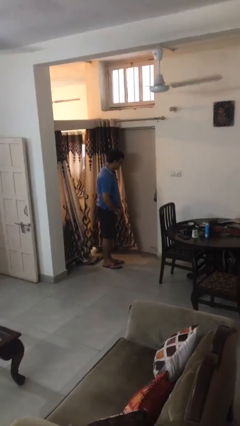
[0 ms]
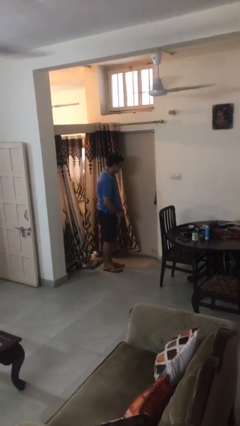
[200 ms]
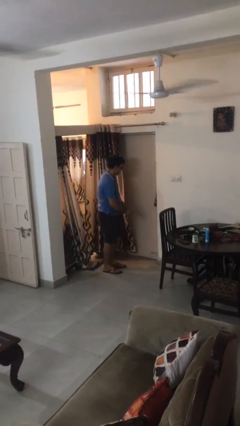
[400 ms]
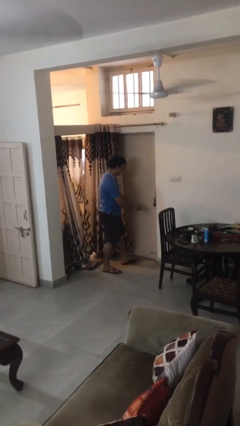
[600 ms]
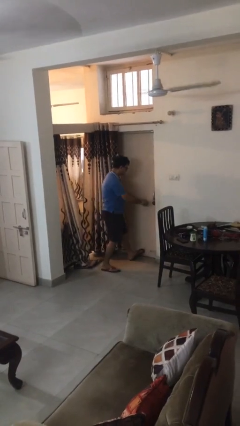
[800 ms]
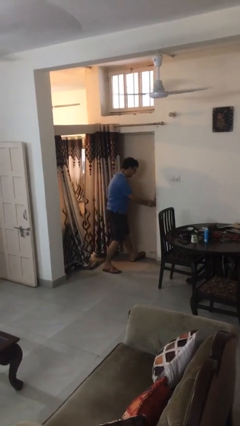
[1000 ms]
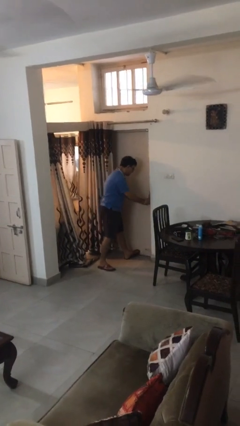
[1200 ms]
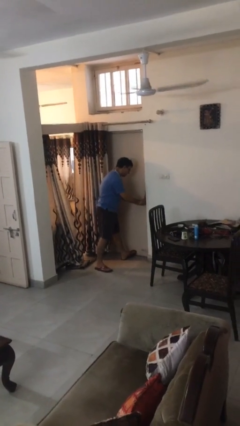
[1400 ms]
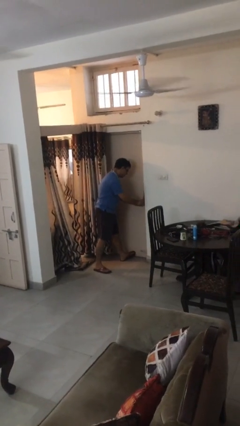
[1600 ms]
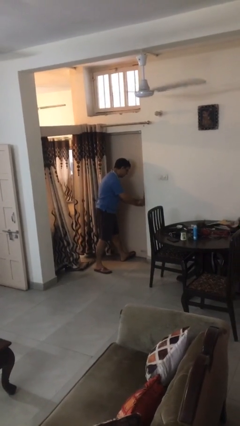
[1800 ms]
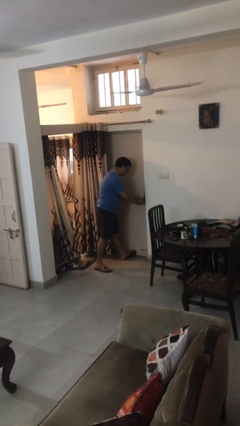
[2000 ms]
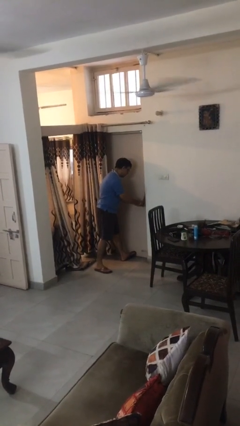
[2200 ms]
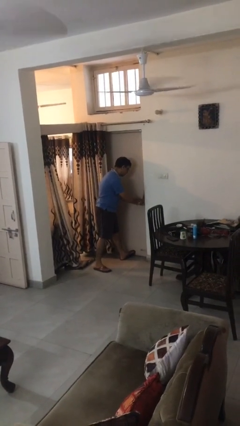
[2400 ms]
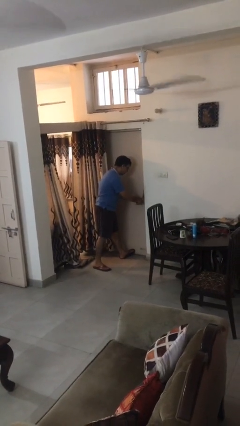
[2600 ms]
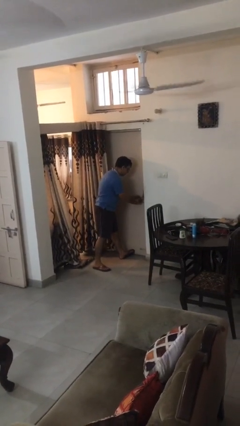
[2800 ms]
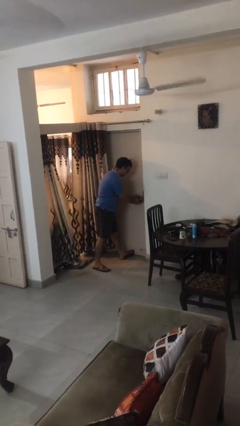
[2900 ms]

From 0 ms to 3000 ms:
person unlocks door with keys

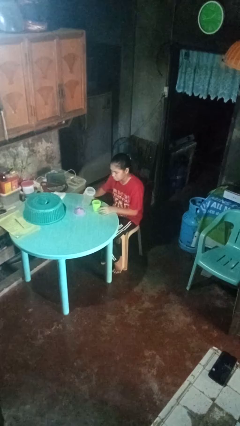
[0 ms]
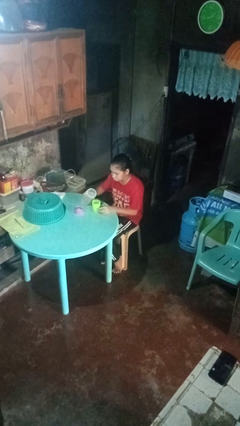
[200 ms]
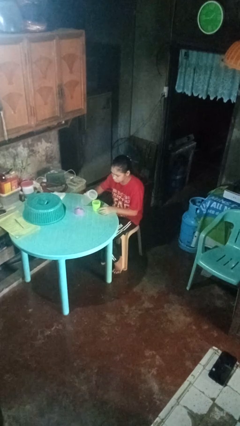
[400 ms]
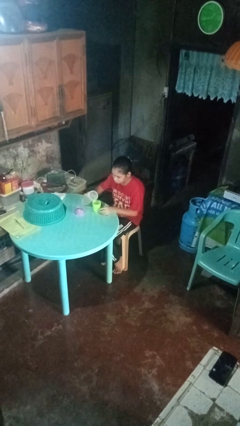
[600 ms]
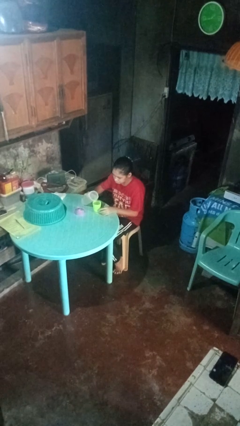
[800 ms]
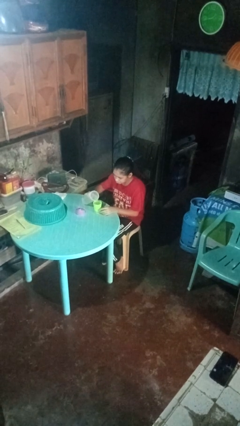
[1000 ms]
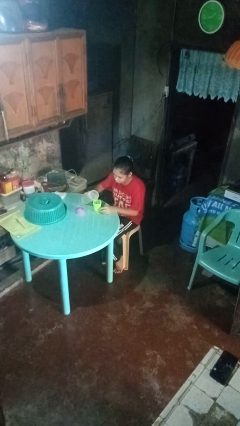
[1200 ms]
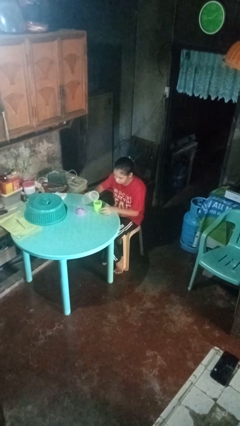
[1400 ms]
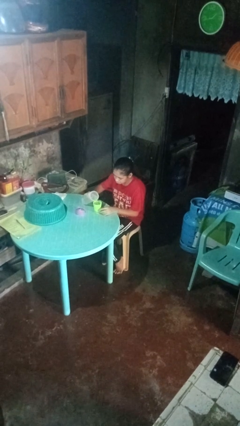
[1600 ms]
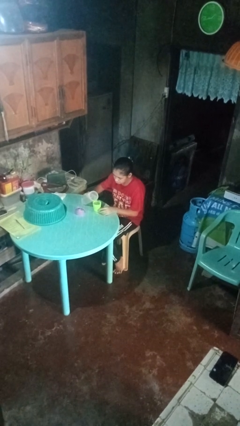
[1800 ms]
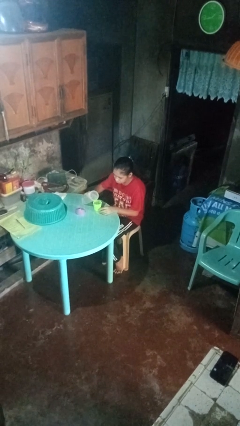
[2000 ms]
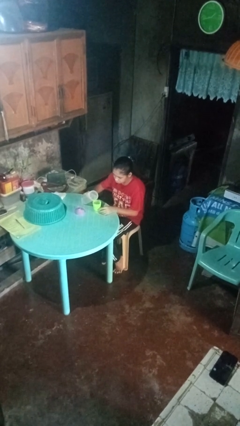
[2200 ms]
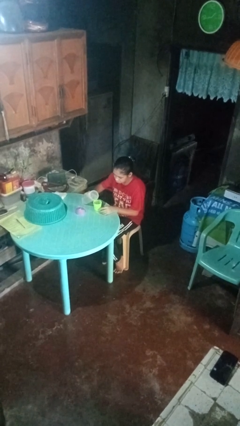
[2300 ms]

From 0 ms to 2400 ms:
person pours liquid into cup

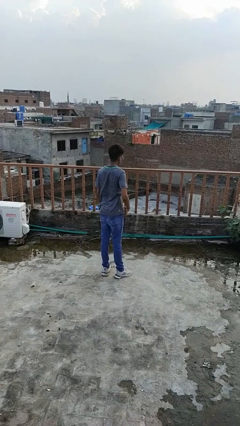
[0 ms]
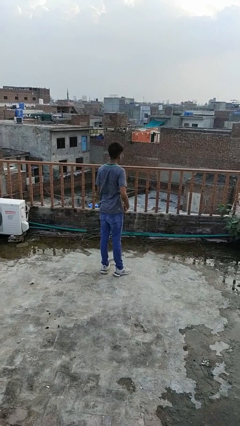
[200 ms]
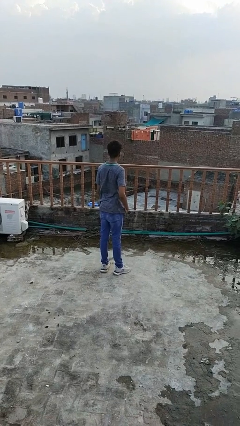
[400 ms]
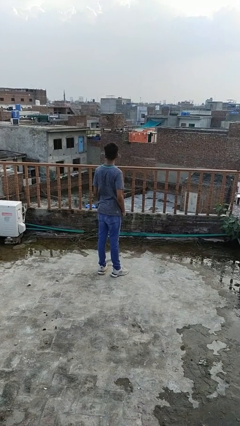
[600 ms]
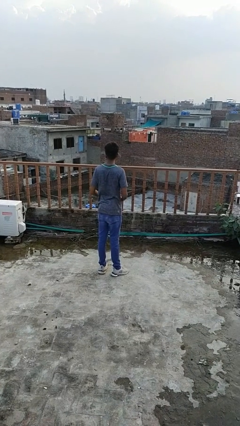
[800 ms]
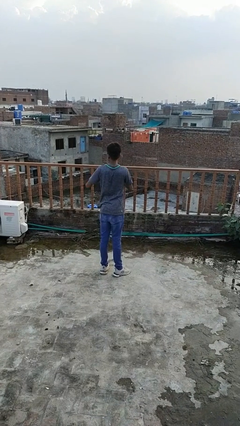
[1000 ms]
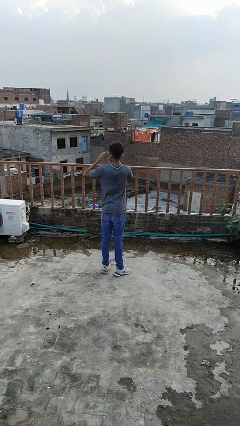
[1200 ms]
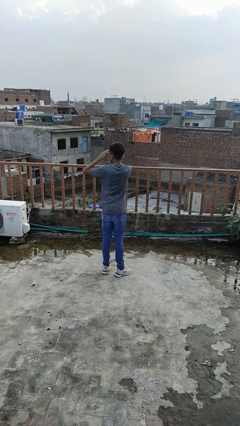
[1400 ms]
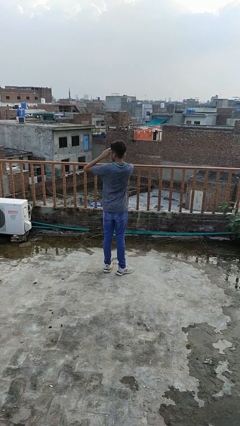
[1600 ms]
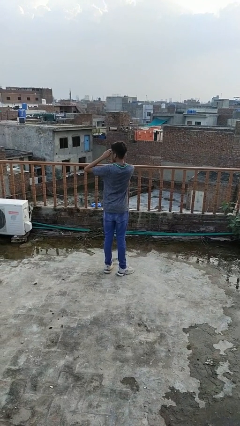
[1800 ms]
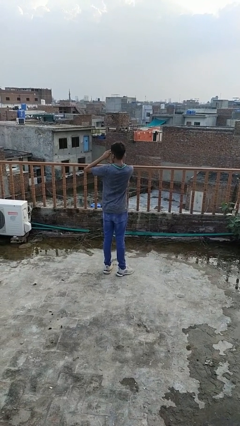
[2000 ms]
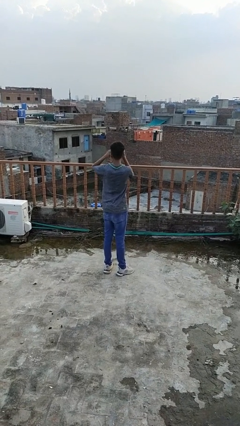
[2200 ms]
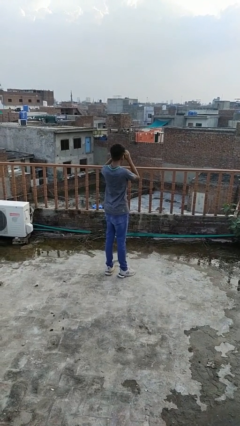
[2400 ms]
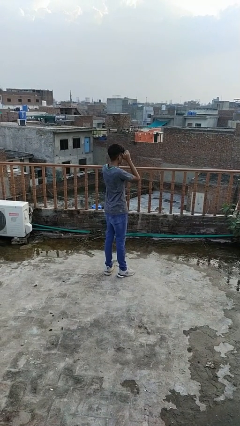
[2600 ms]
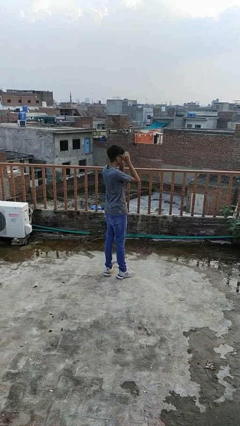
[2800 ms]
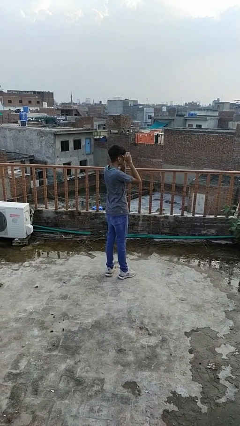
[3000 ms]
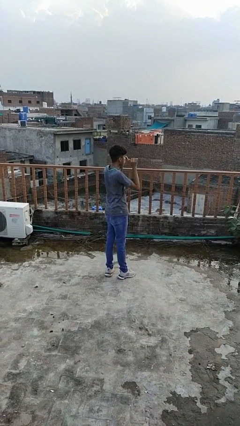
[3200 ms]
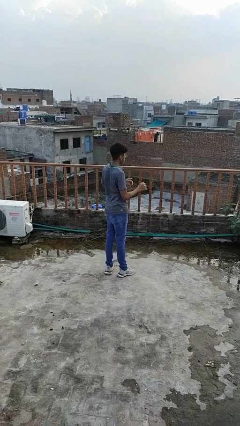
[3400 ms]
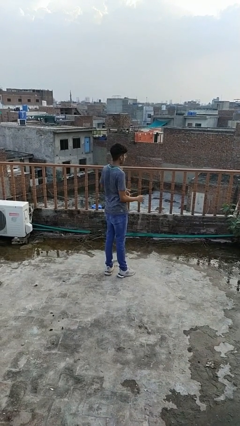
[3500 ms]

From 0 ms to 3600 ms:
person shades eyes

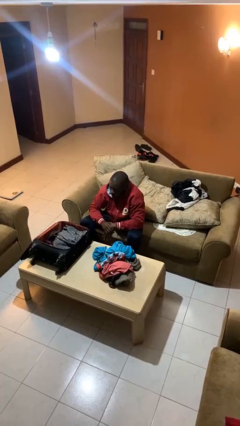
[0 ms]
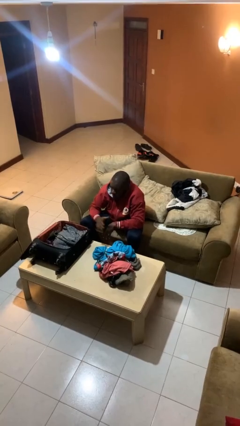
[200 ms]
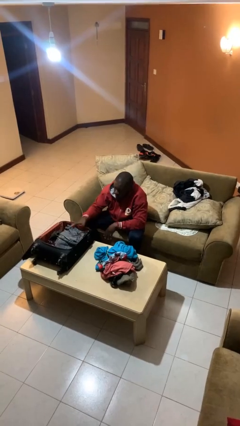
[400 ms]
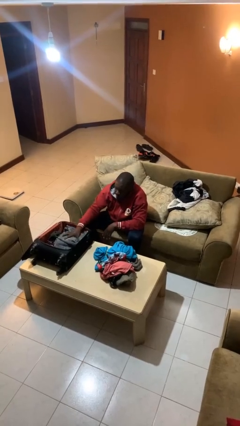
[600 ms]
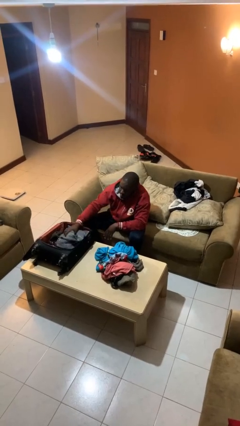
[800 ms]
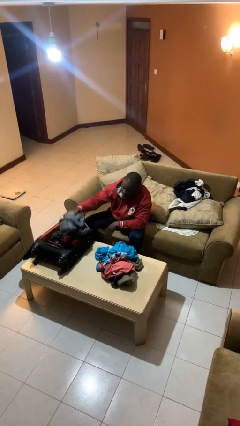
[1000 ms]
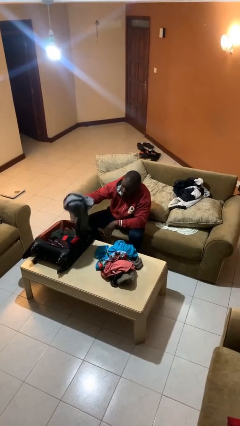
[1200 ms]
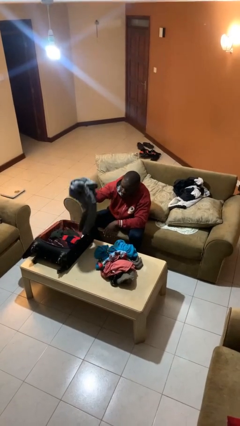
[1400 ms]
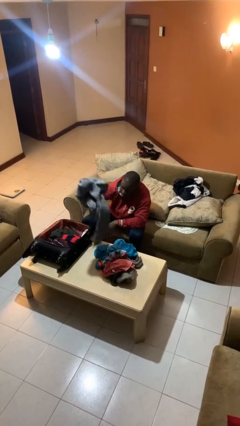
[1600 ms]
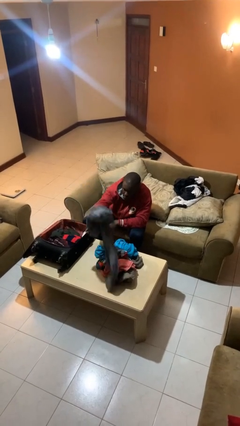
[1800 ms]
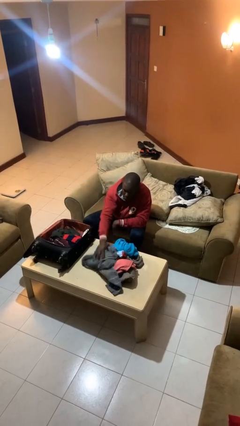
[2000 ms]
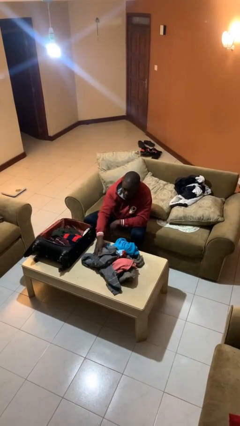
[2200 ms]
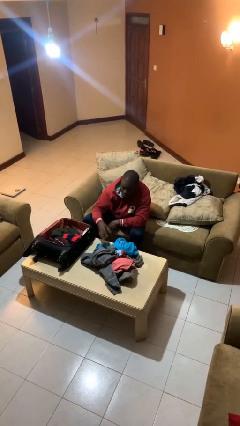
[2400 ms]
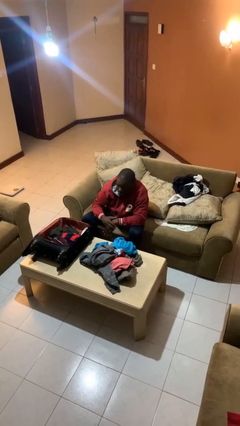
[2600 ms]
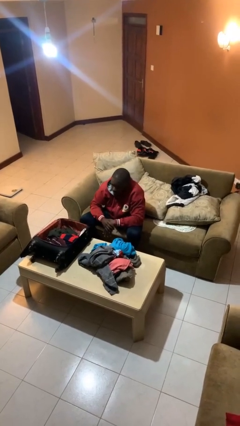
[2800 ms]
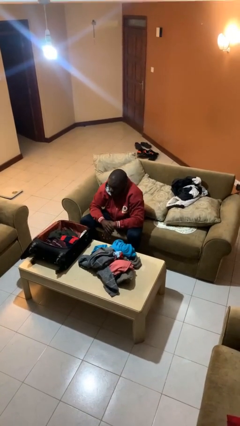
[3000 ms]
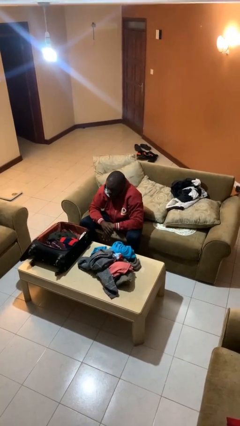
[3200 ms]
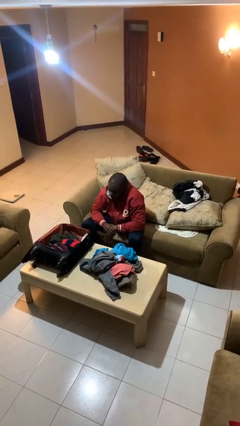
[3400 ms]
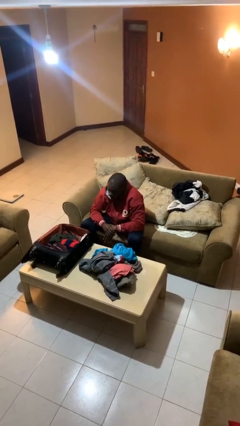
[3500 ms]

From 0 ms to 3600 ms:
person unloads clothes from suitcase

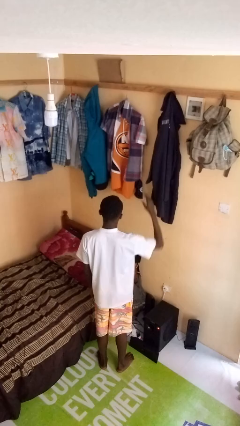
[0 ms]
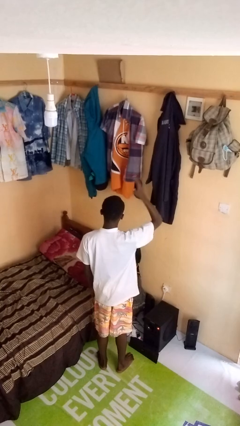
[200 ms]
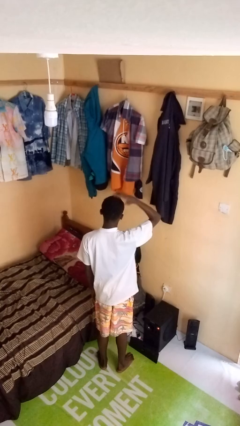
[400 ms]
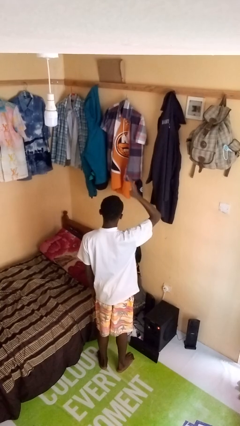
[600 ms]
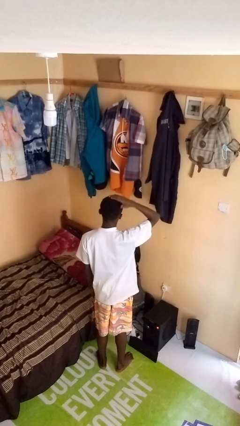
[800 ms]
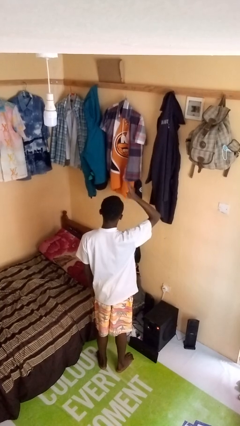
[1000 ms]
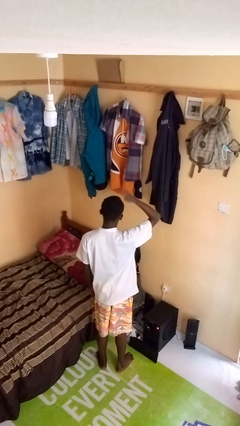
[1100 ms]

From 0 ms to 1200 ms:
person pats head

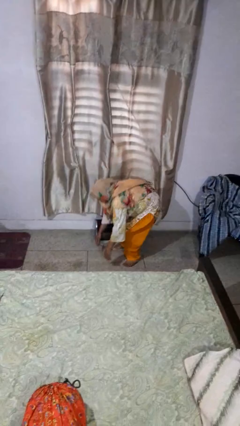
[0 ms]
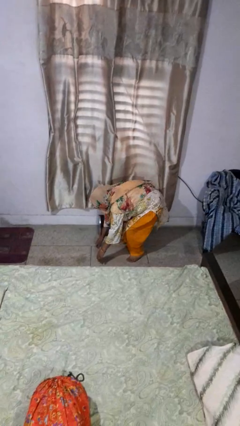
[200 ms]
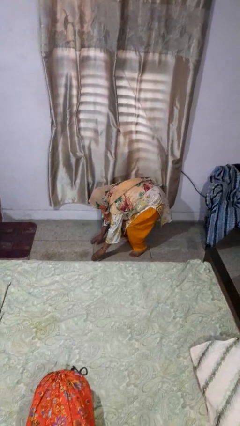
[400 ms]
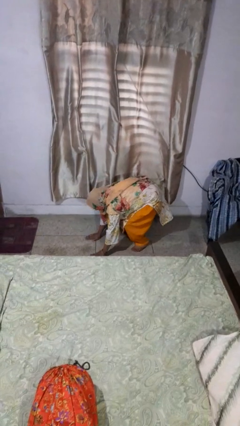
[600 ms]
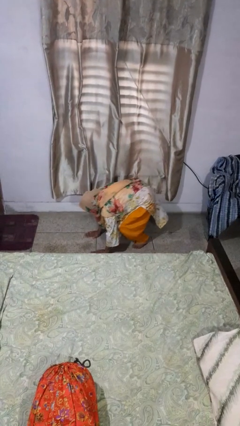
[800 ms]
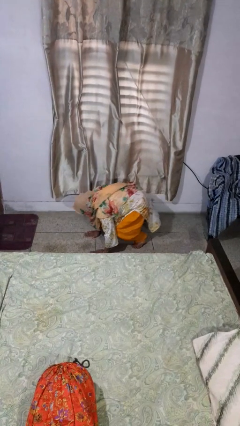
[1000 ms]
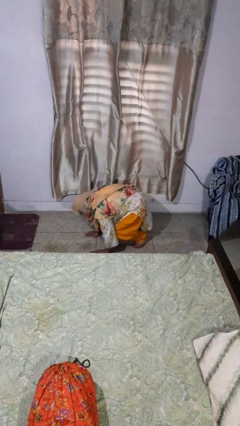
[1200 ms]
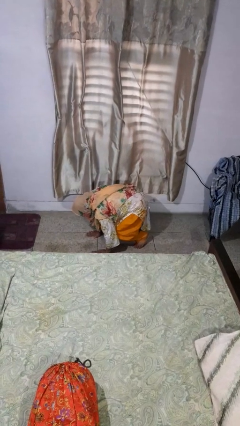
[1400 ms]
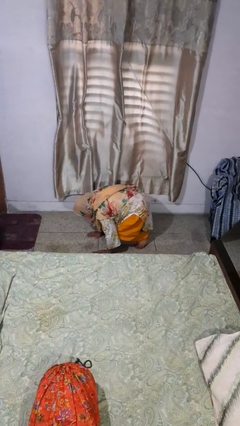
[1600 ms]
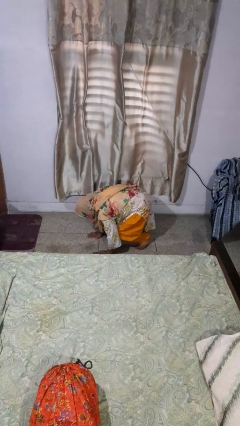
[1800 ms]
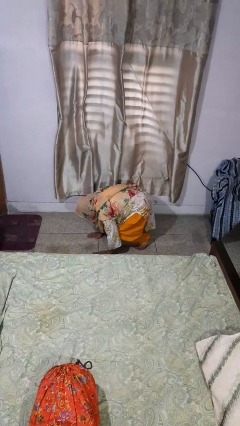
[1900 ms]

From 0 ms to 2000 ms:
person lies down on floor

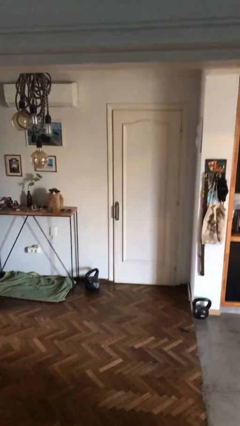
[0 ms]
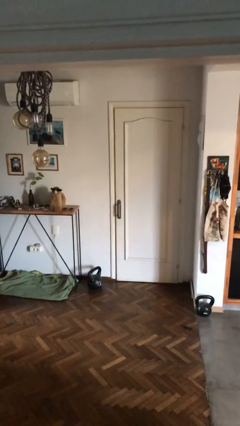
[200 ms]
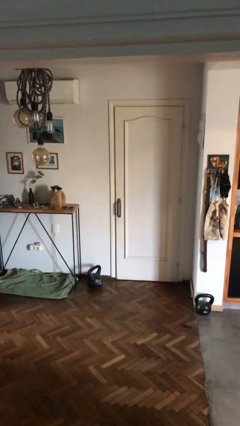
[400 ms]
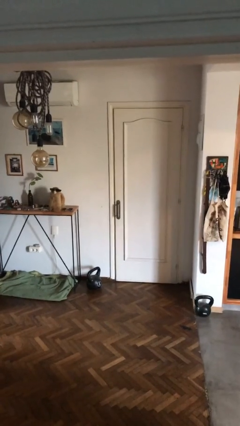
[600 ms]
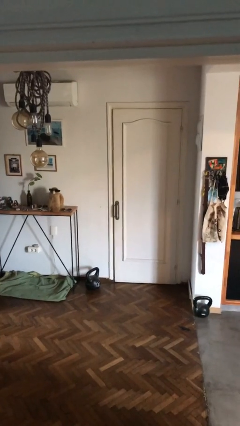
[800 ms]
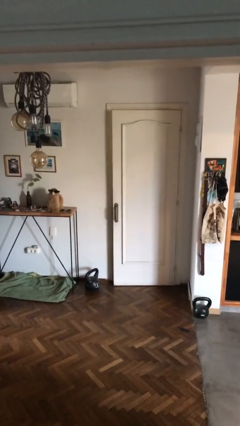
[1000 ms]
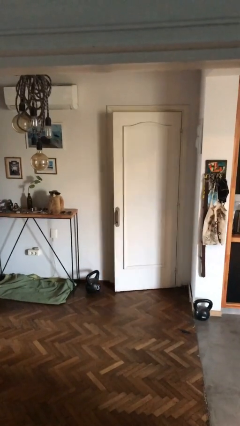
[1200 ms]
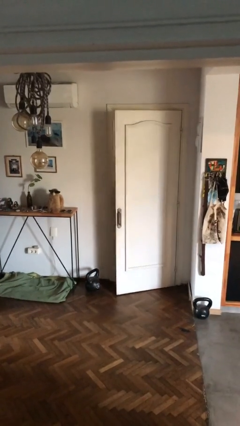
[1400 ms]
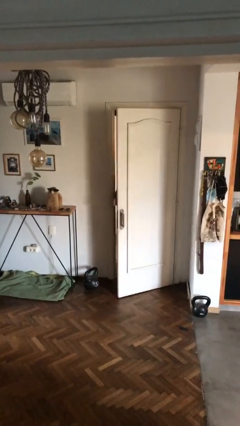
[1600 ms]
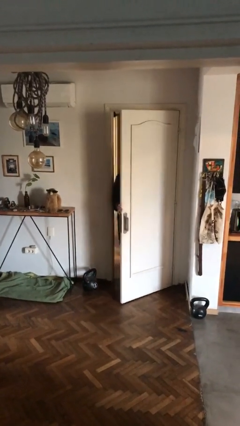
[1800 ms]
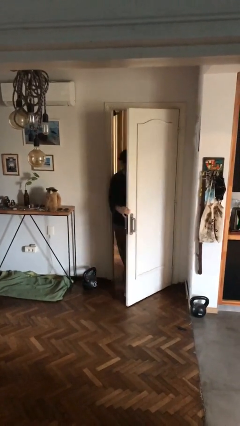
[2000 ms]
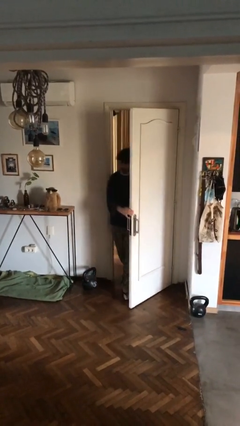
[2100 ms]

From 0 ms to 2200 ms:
person opens facility door
